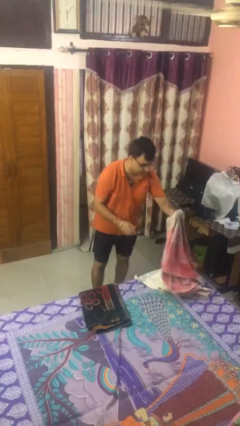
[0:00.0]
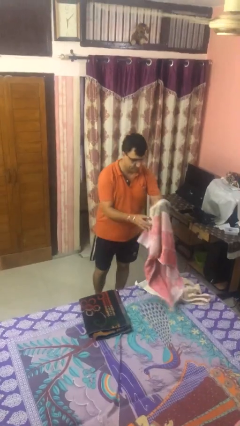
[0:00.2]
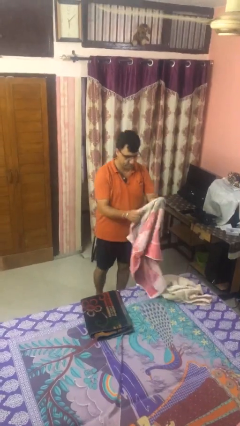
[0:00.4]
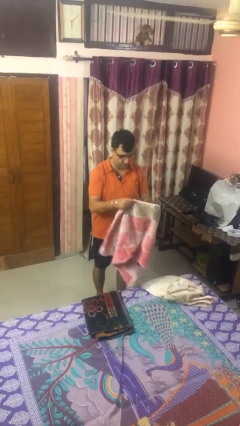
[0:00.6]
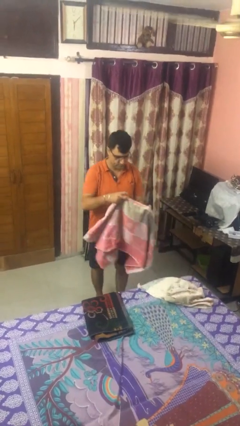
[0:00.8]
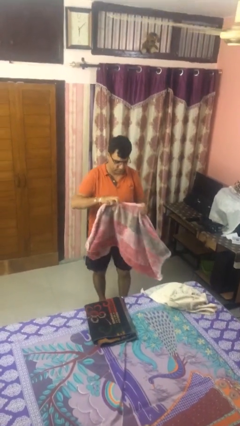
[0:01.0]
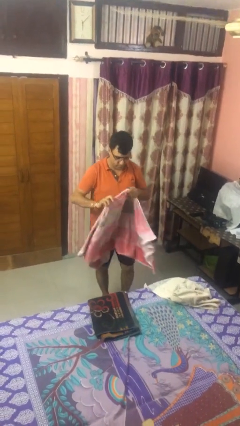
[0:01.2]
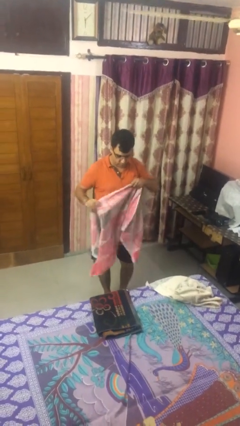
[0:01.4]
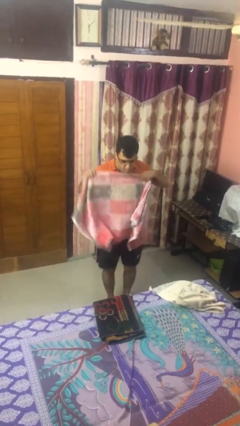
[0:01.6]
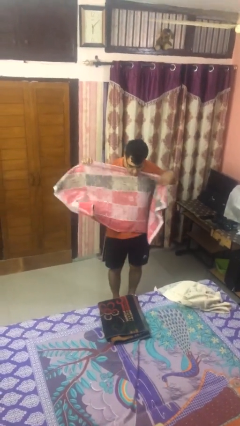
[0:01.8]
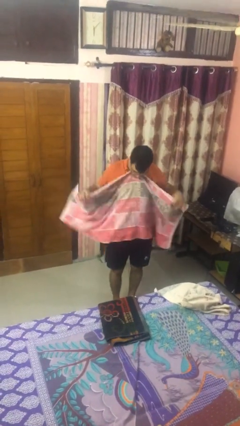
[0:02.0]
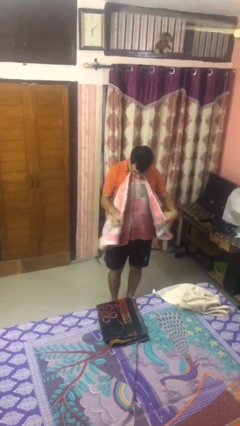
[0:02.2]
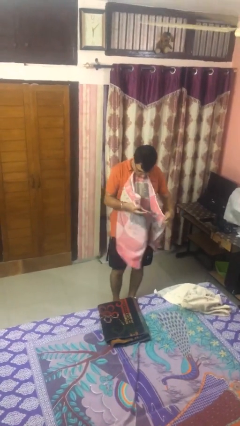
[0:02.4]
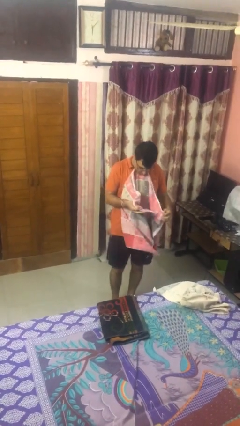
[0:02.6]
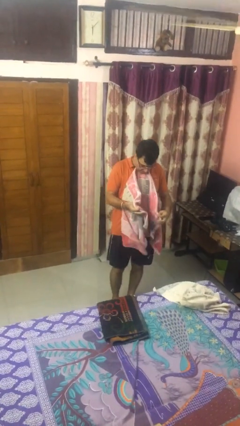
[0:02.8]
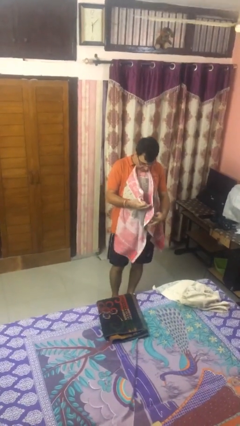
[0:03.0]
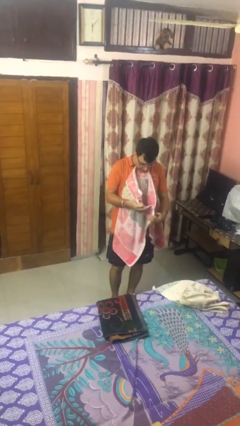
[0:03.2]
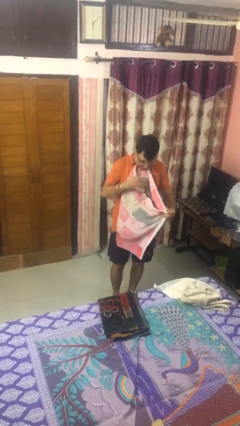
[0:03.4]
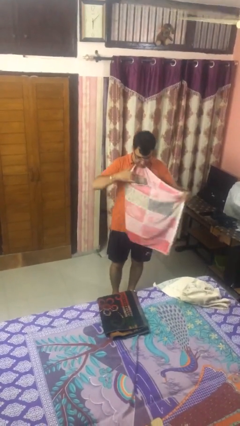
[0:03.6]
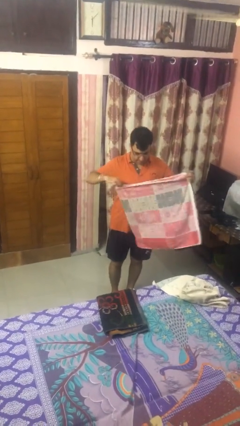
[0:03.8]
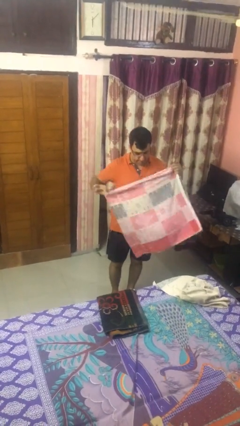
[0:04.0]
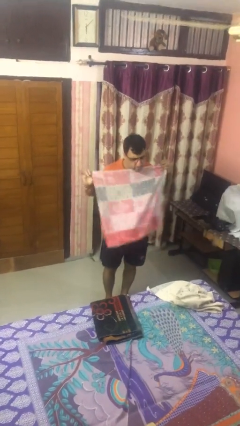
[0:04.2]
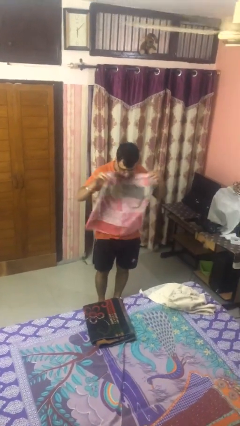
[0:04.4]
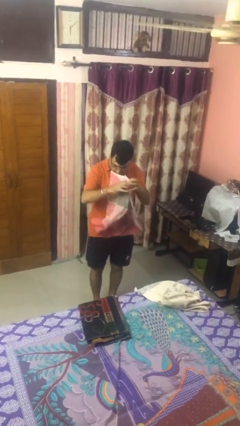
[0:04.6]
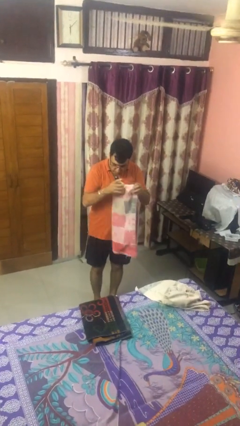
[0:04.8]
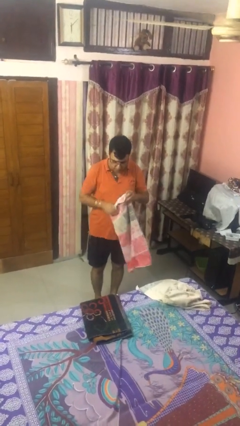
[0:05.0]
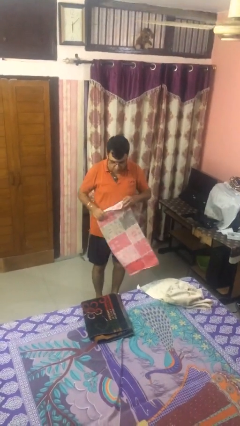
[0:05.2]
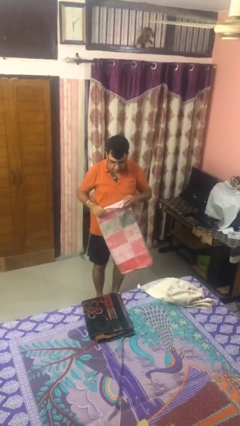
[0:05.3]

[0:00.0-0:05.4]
person folds towel

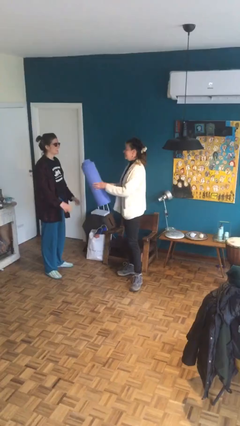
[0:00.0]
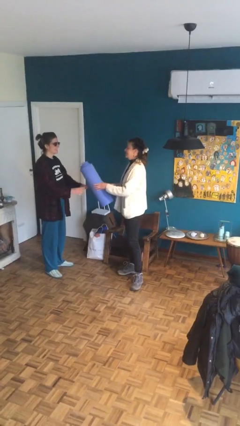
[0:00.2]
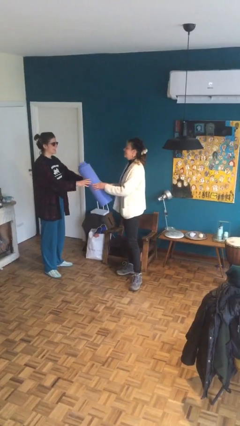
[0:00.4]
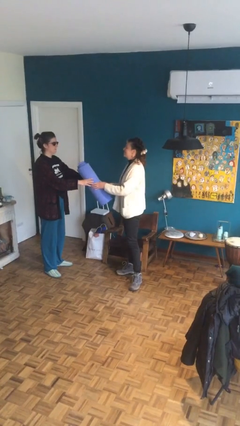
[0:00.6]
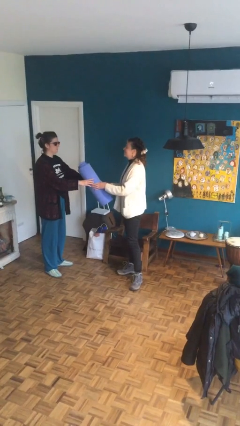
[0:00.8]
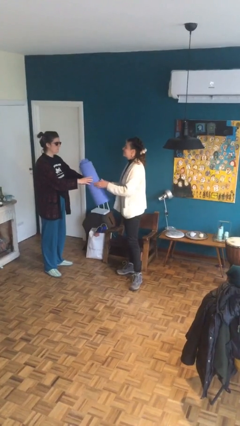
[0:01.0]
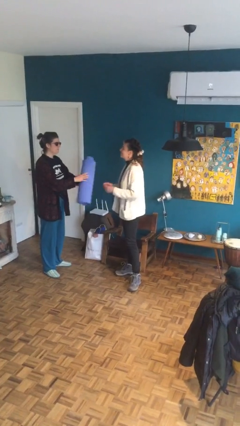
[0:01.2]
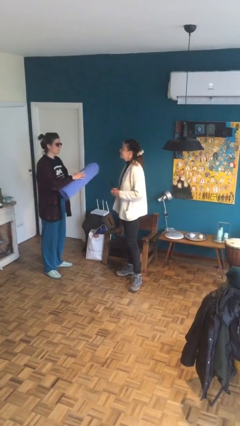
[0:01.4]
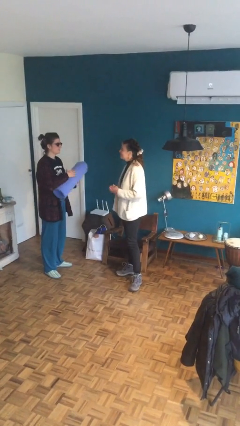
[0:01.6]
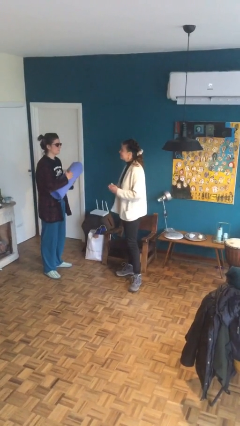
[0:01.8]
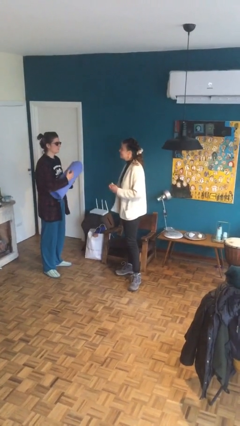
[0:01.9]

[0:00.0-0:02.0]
person transfers object to person

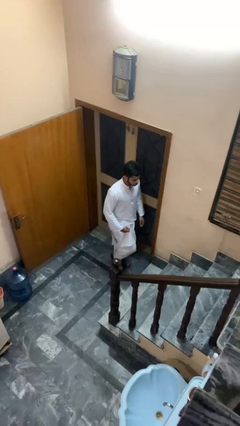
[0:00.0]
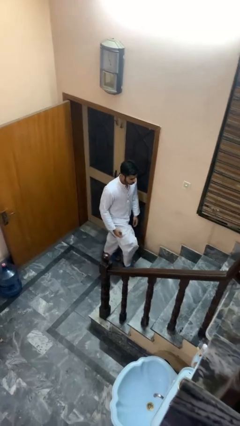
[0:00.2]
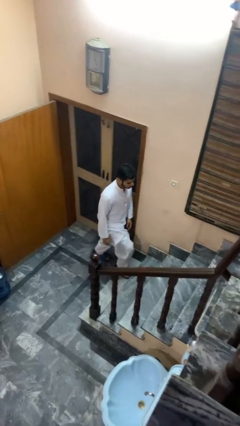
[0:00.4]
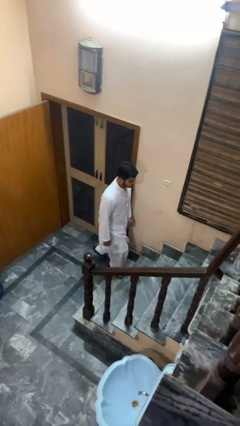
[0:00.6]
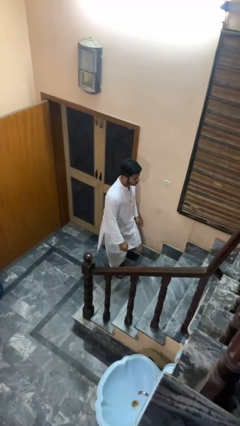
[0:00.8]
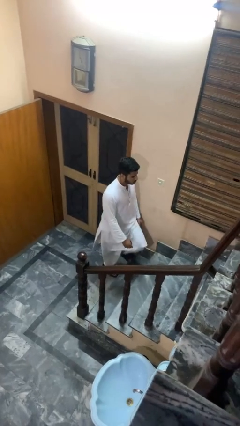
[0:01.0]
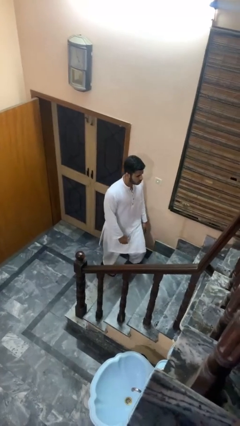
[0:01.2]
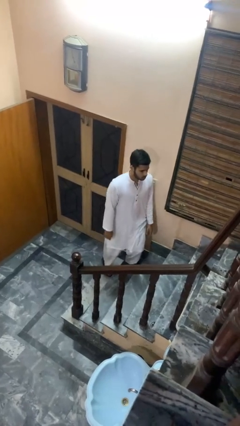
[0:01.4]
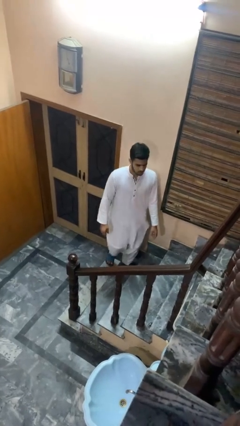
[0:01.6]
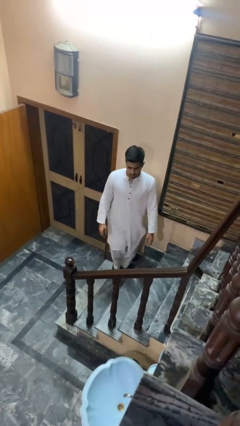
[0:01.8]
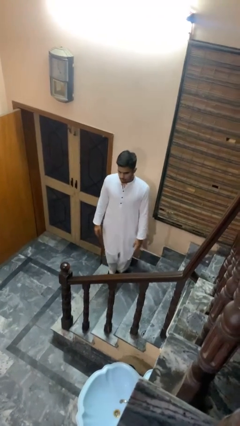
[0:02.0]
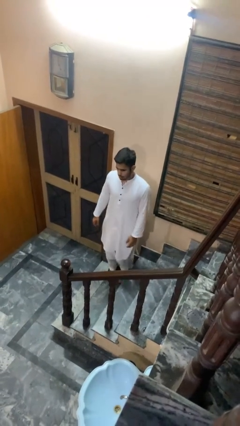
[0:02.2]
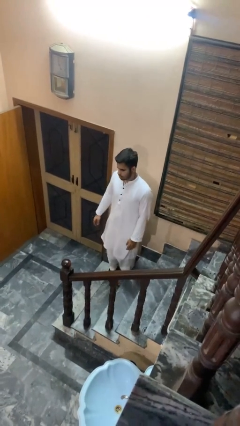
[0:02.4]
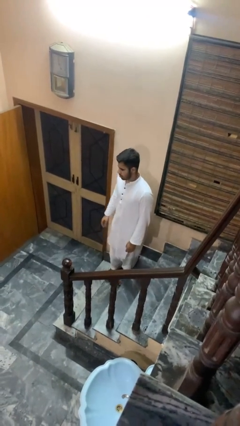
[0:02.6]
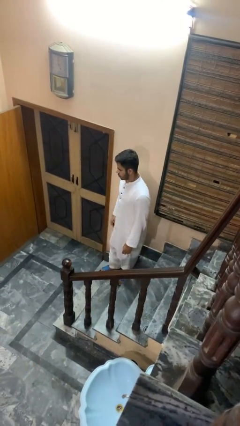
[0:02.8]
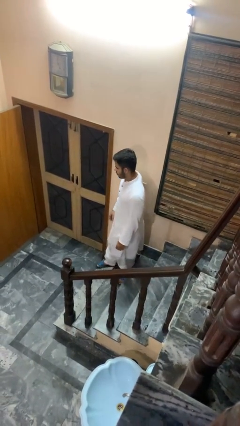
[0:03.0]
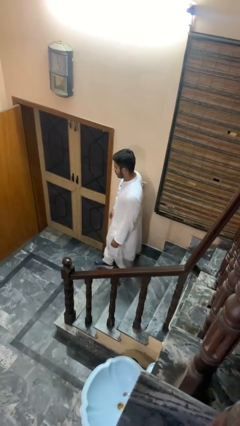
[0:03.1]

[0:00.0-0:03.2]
person climbs up stairs

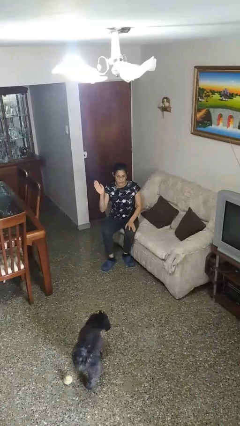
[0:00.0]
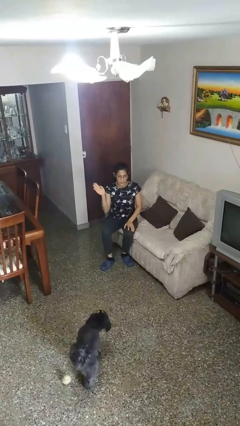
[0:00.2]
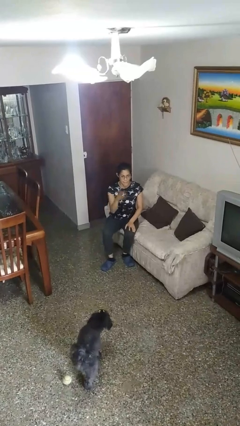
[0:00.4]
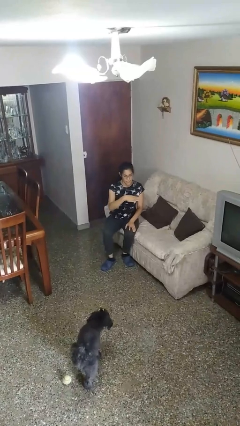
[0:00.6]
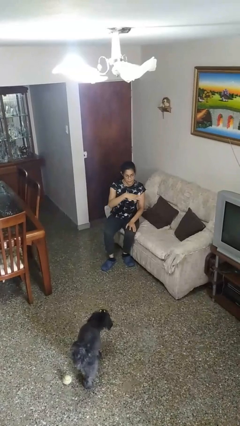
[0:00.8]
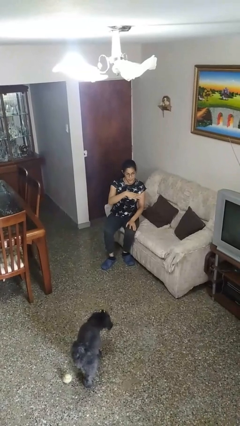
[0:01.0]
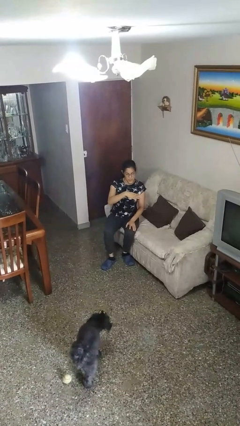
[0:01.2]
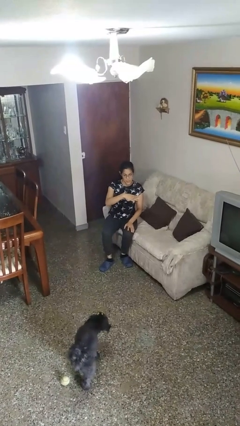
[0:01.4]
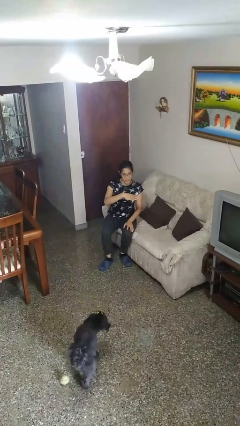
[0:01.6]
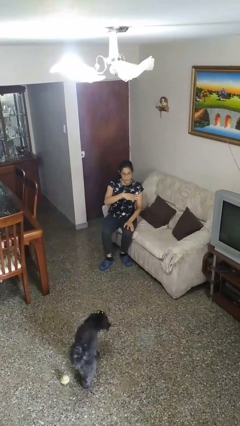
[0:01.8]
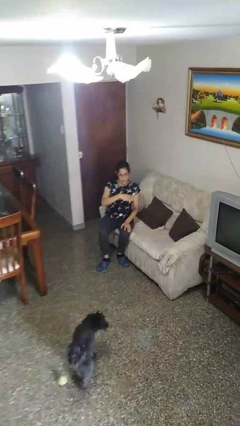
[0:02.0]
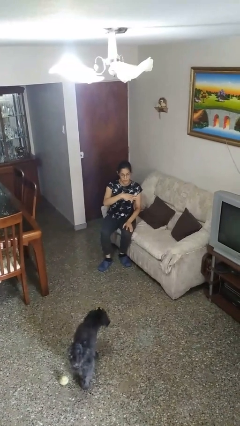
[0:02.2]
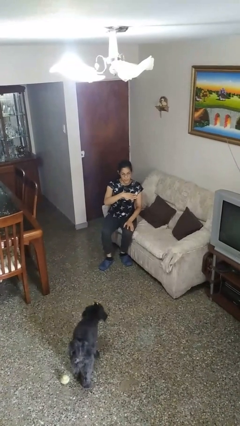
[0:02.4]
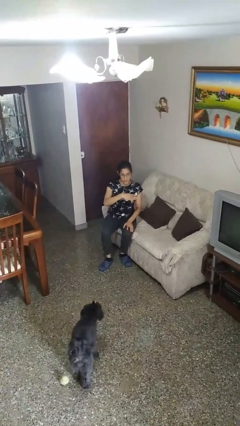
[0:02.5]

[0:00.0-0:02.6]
person gestures swipe left

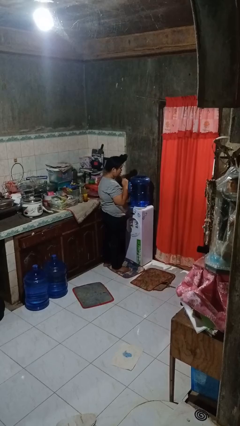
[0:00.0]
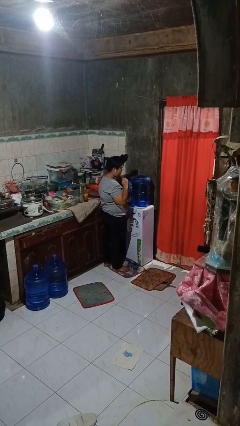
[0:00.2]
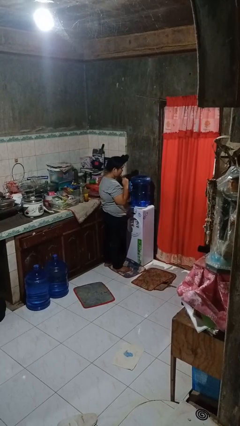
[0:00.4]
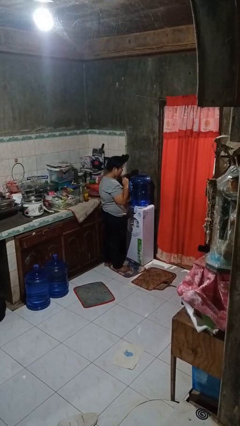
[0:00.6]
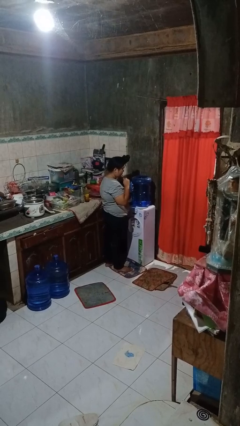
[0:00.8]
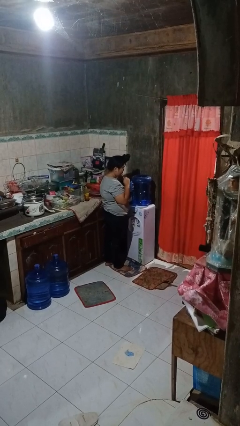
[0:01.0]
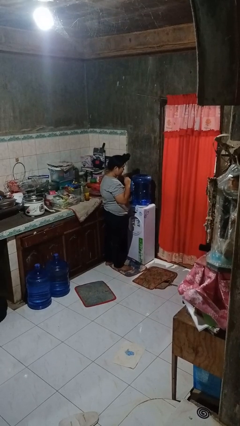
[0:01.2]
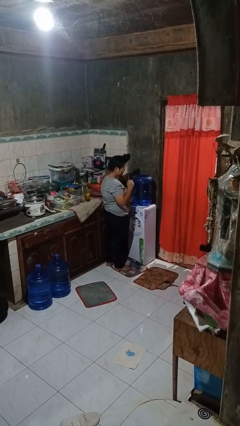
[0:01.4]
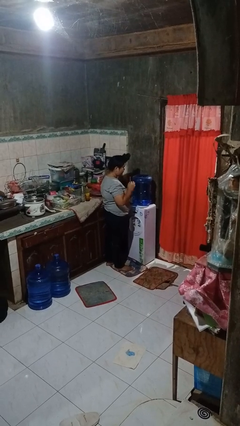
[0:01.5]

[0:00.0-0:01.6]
person drinks from straw

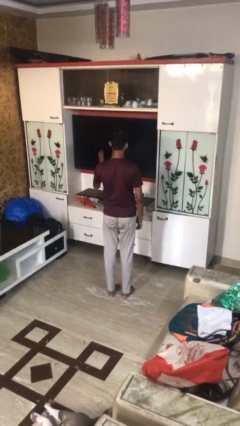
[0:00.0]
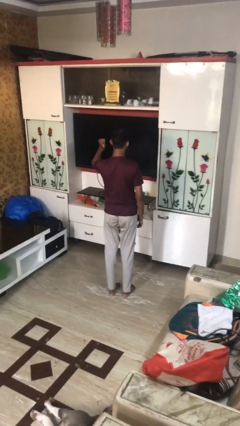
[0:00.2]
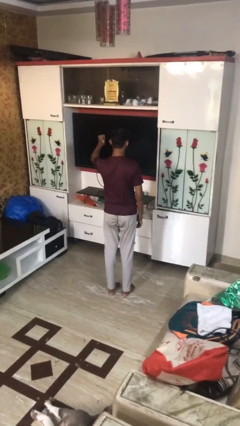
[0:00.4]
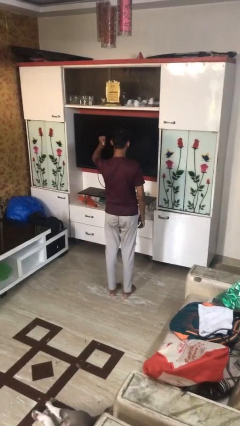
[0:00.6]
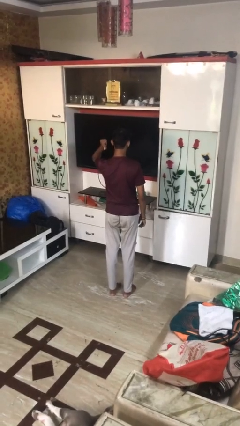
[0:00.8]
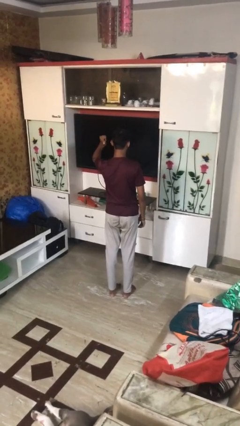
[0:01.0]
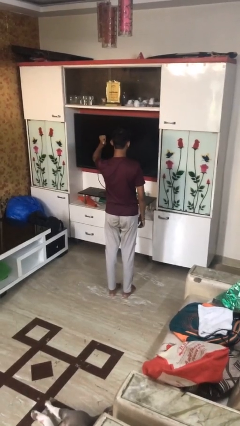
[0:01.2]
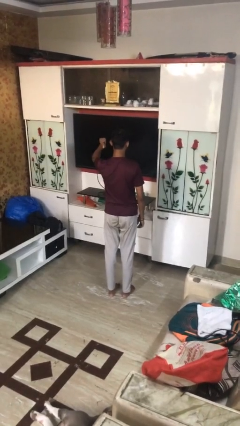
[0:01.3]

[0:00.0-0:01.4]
person gestures behind me

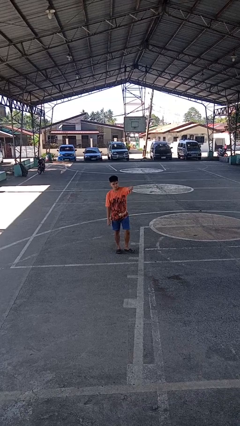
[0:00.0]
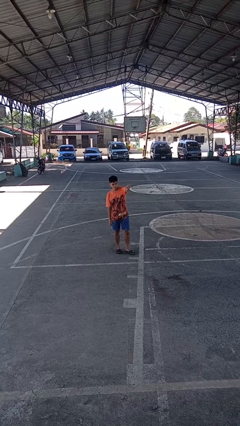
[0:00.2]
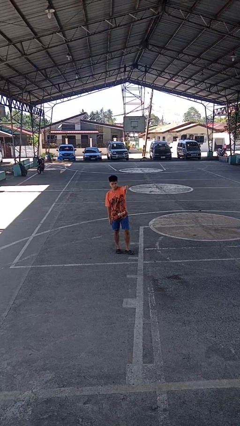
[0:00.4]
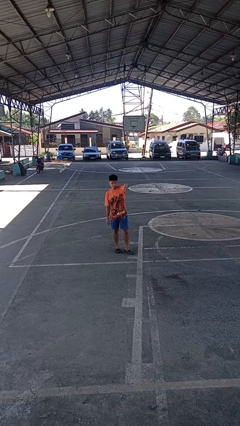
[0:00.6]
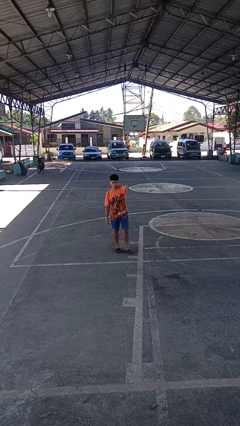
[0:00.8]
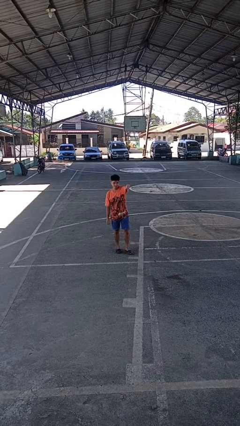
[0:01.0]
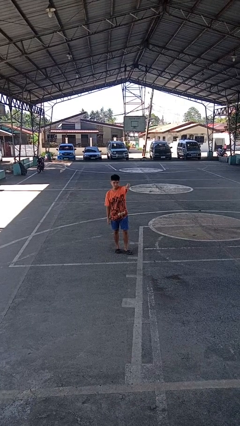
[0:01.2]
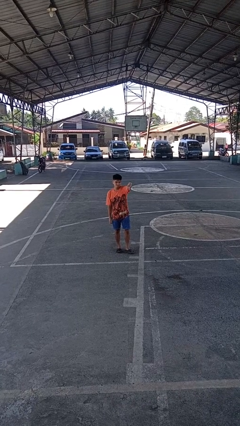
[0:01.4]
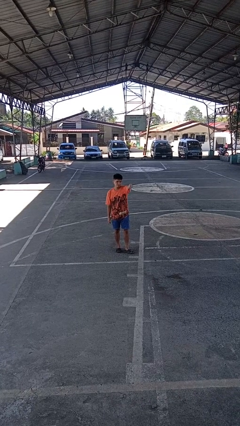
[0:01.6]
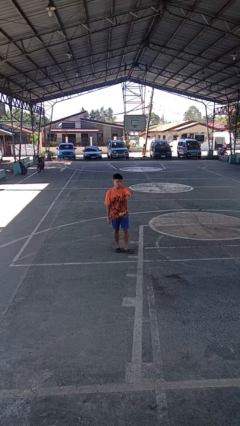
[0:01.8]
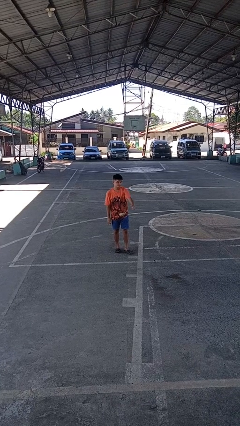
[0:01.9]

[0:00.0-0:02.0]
person gestures thumbs down
